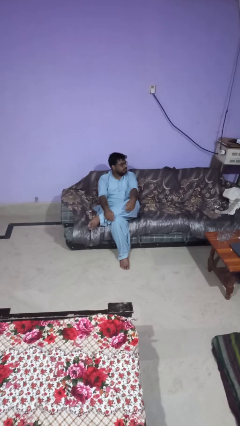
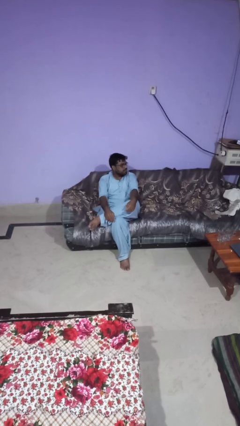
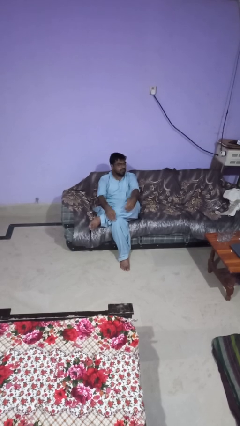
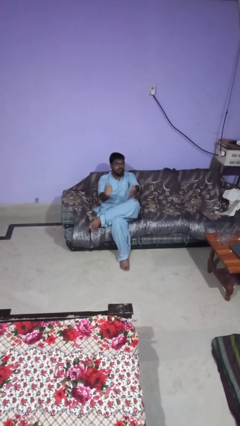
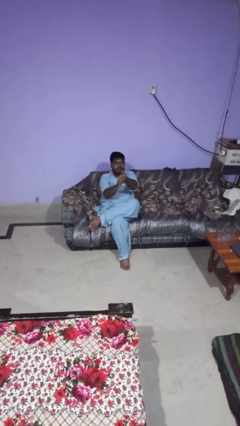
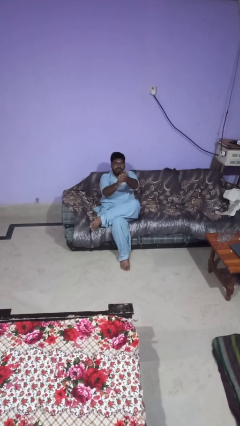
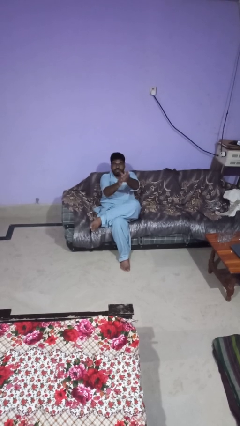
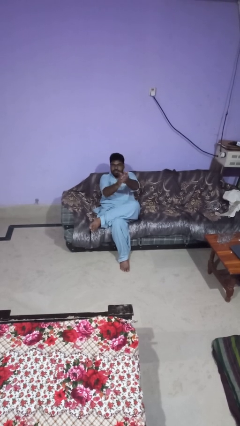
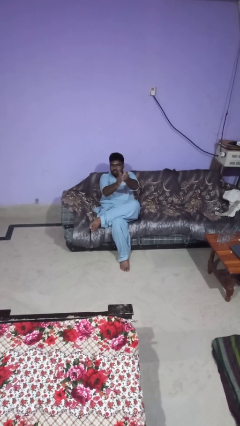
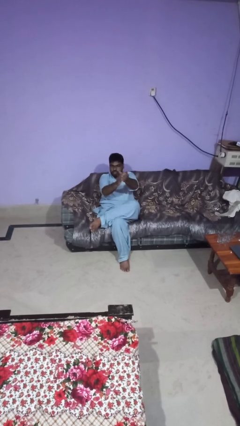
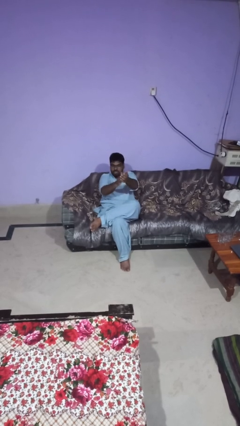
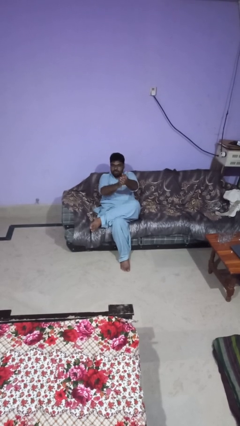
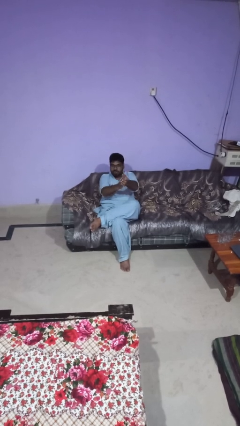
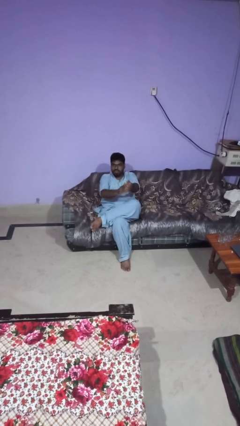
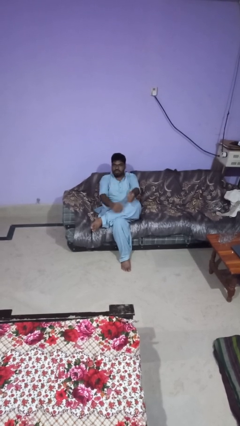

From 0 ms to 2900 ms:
person claps hands

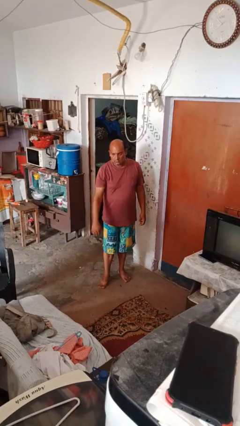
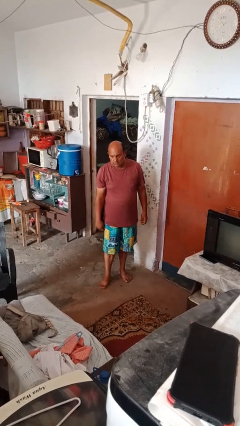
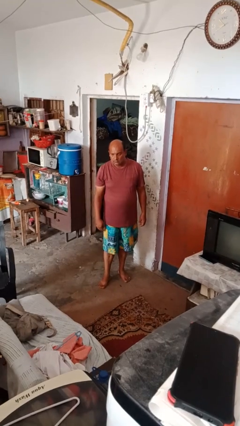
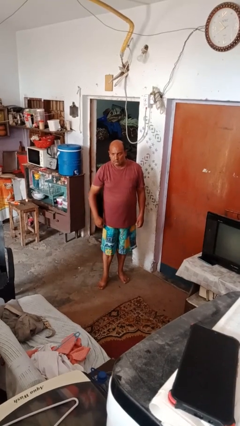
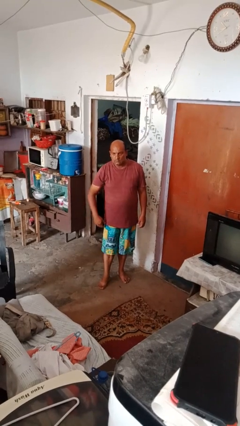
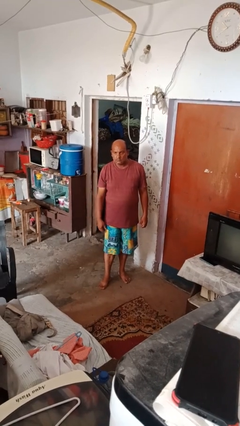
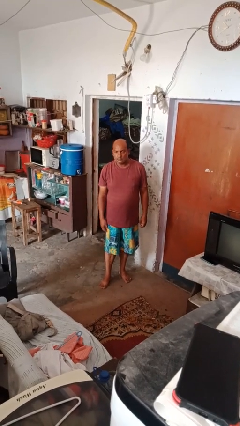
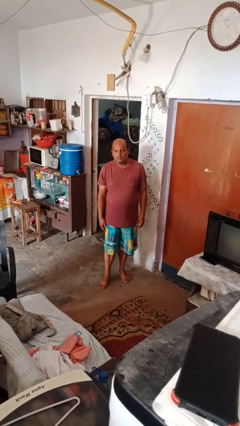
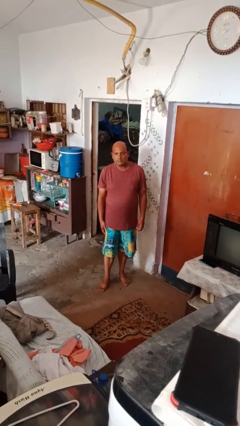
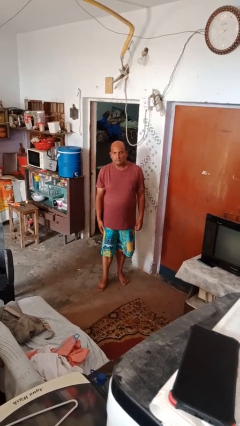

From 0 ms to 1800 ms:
person gestures swipe down

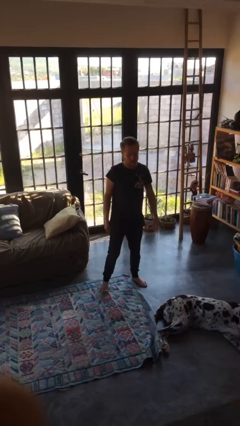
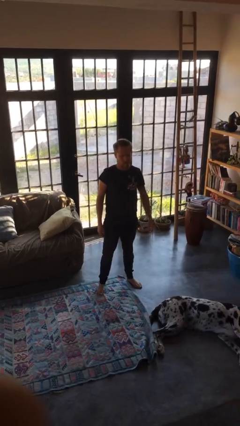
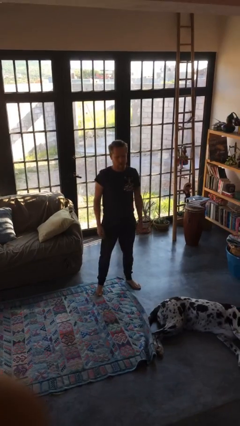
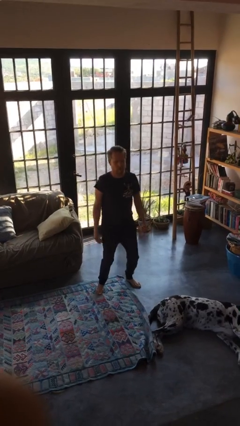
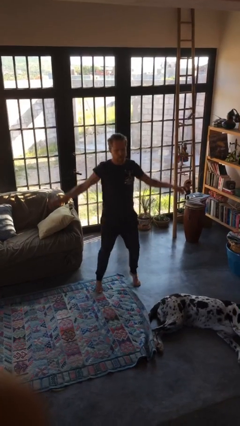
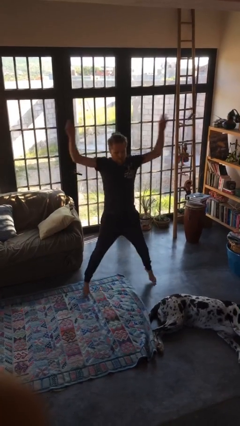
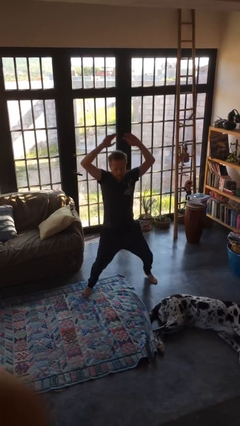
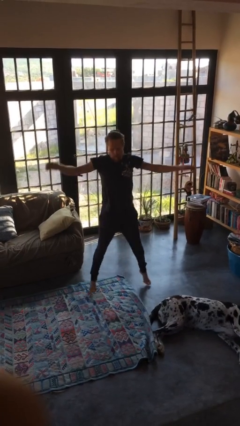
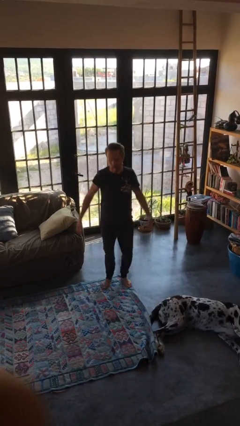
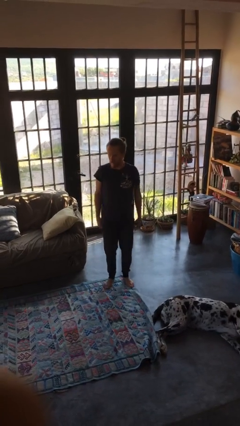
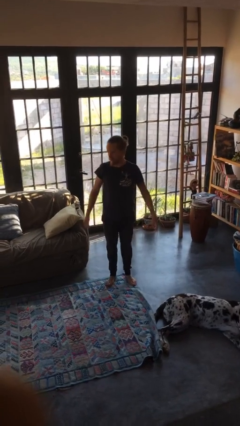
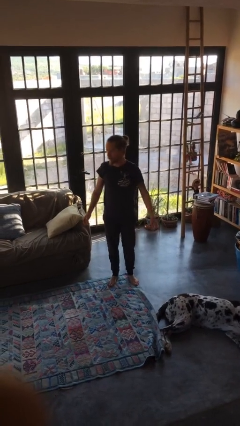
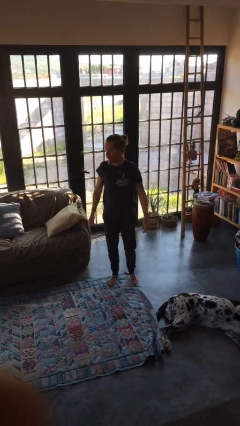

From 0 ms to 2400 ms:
person exercises with jumping jacks

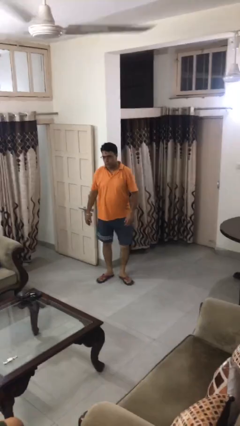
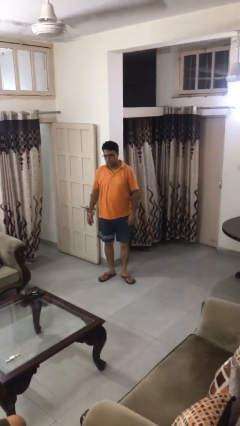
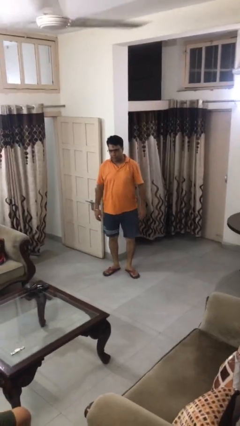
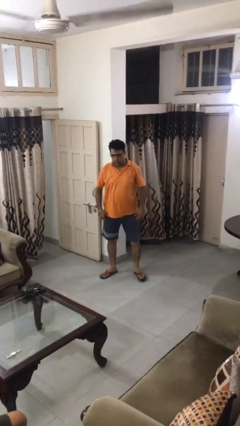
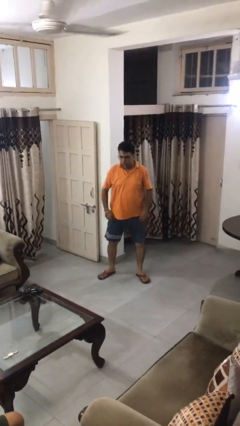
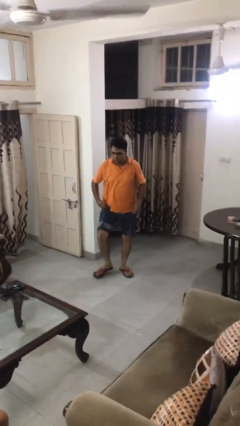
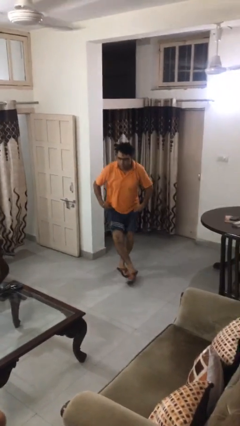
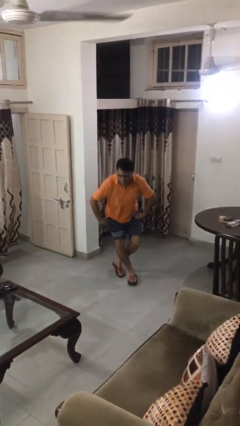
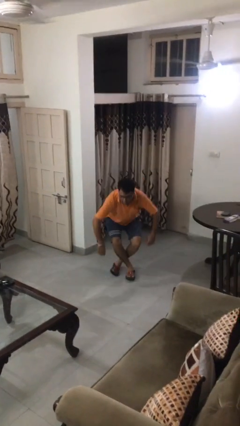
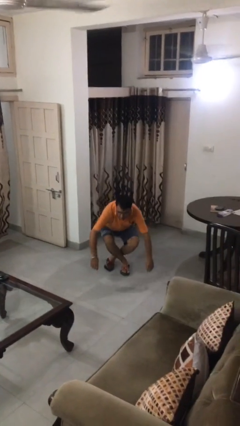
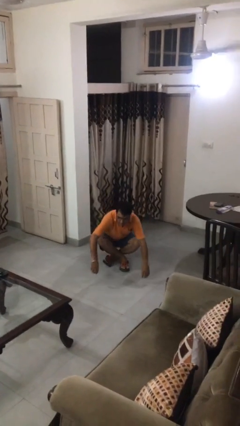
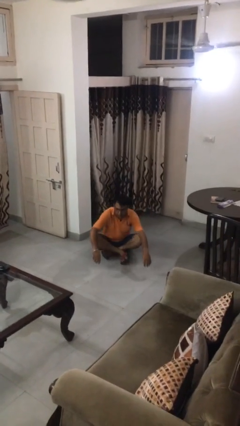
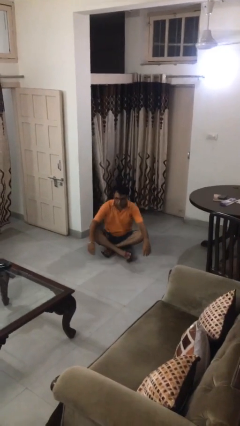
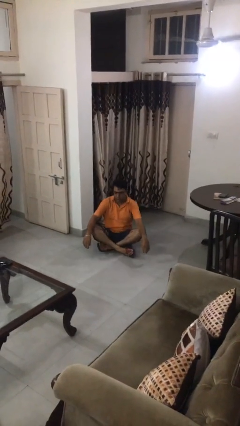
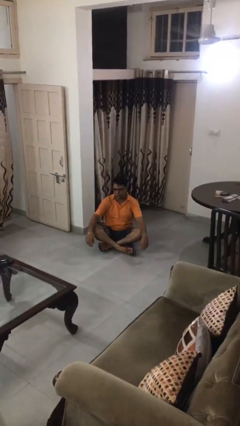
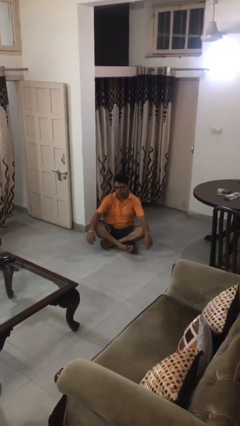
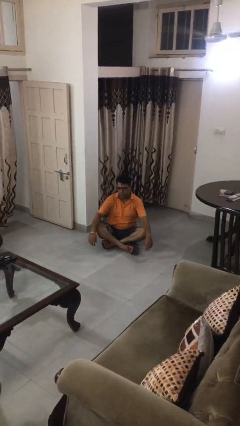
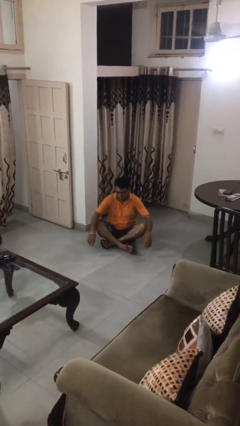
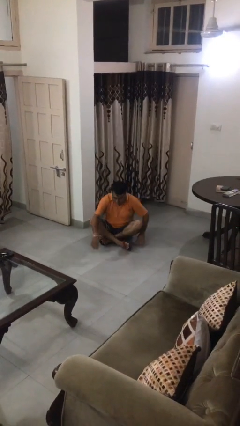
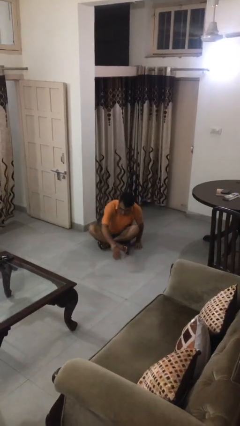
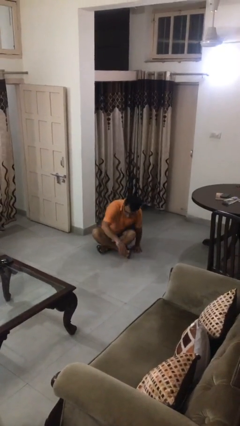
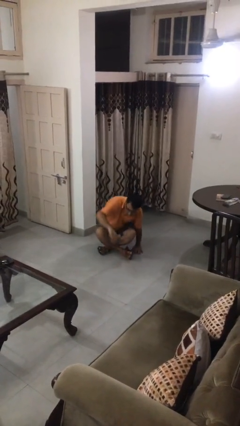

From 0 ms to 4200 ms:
person sits crisscross

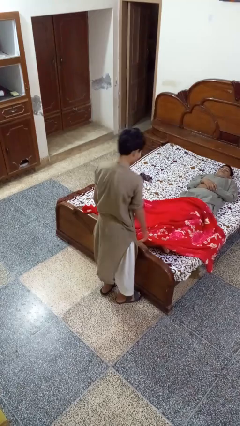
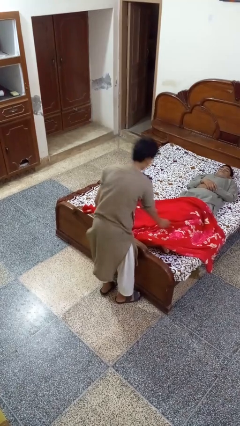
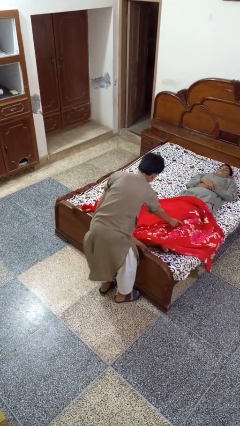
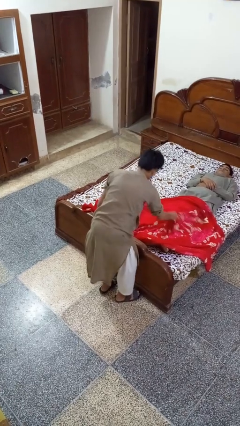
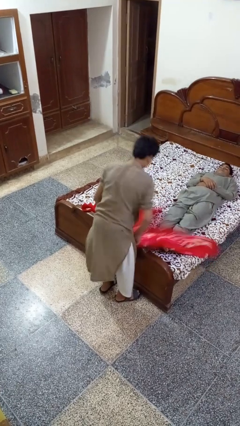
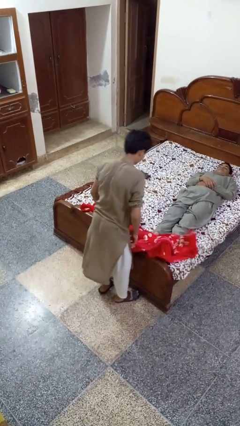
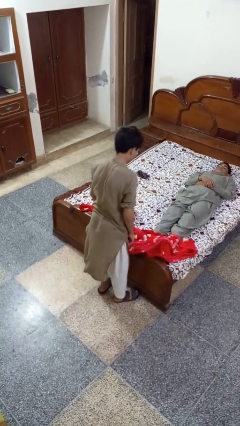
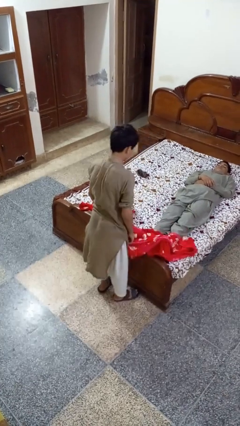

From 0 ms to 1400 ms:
person uncovers friend with blanket

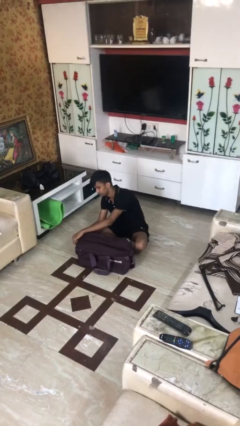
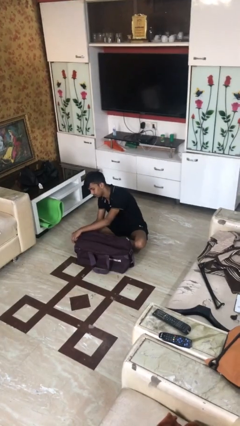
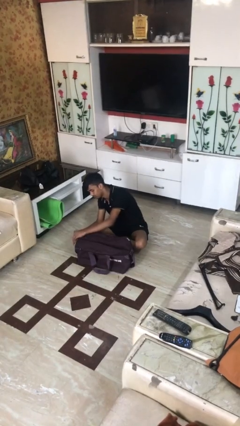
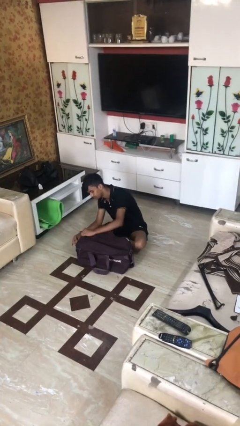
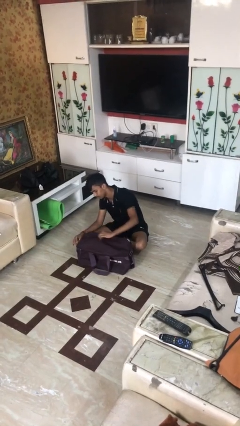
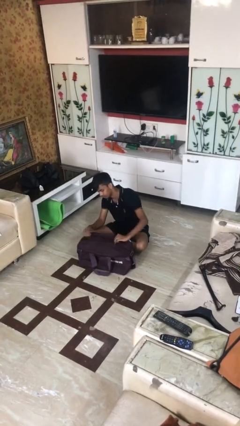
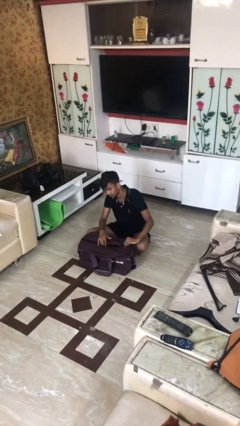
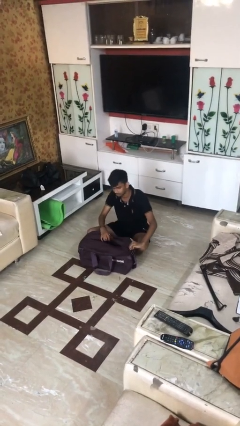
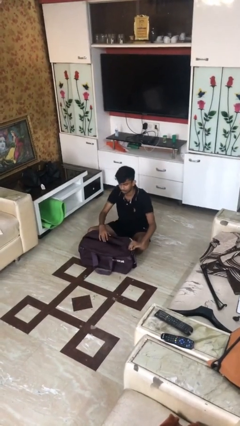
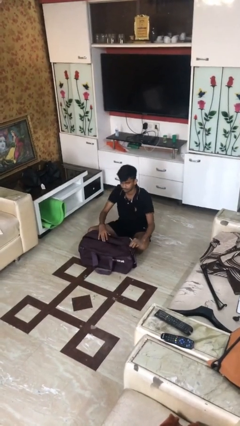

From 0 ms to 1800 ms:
person opens suitcase

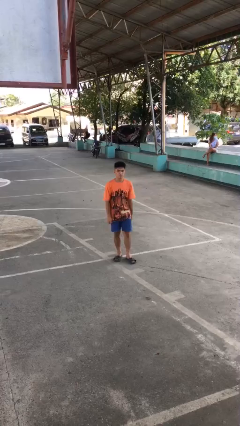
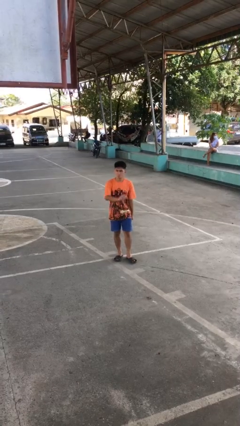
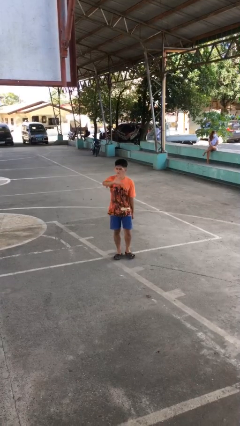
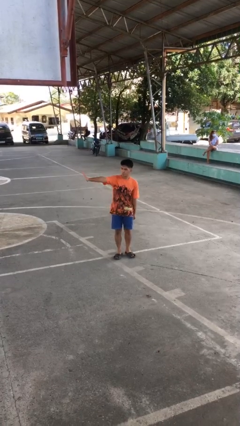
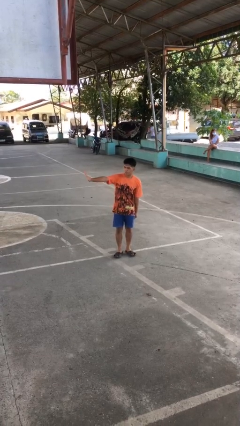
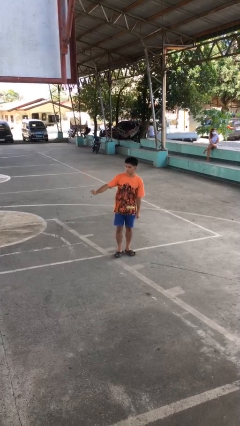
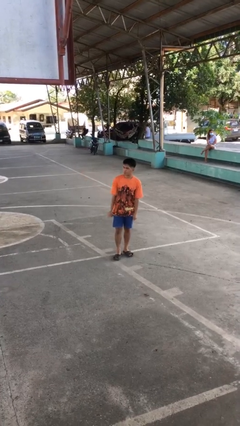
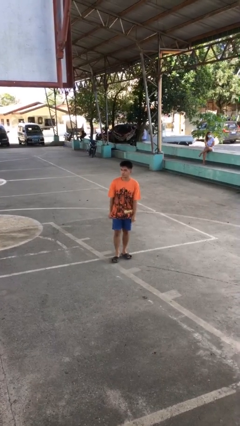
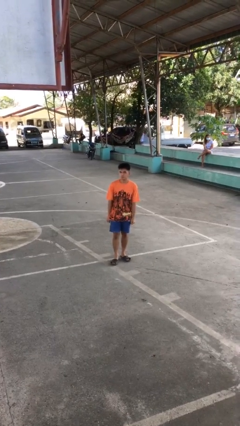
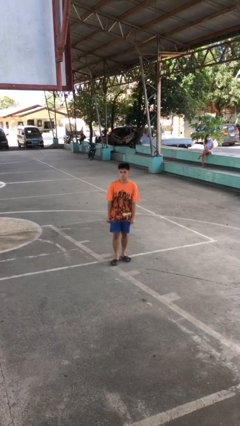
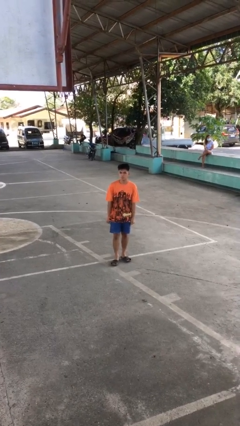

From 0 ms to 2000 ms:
person gestures swipe right

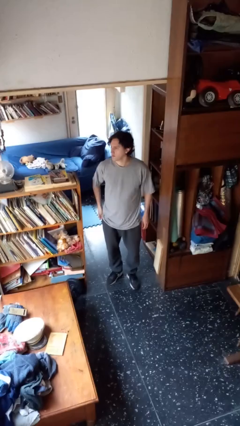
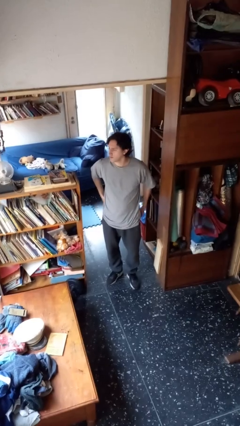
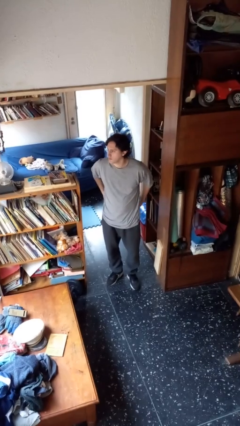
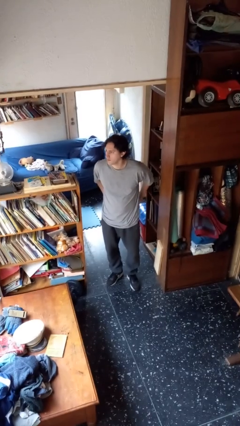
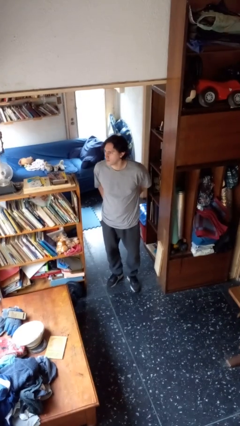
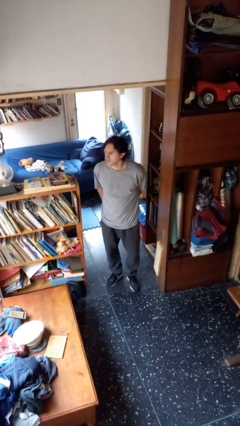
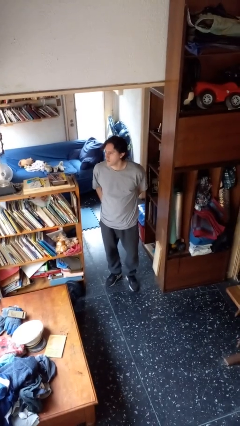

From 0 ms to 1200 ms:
person puts hands in back pockets
